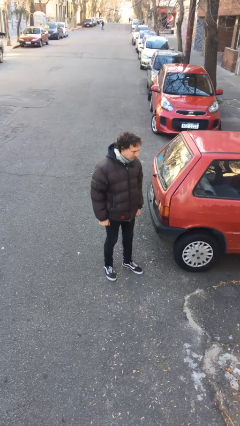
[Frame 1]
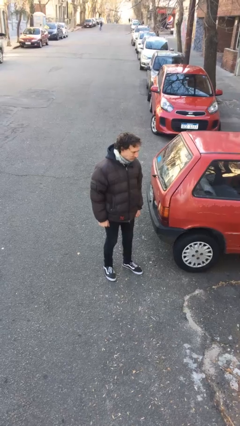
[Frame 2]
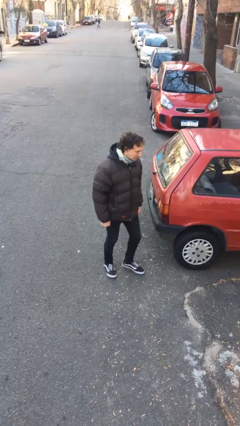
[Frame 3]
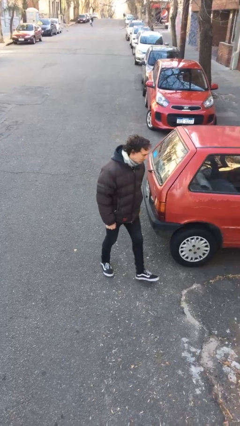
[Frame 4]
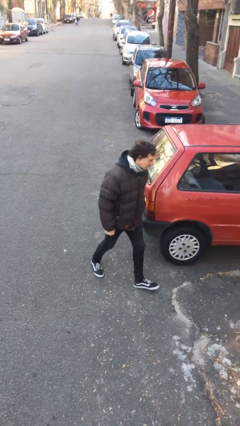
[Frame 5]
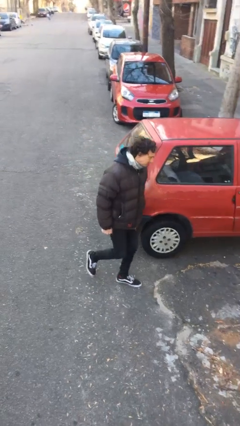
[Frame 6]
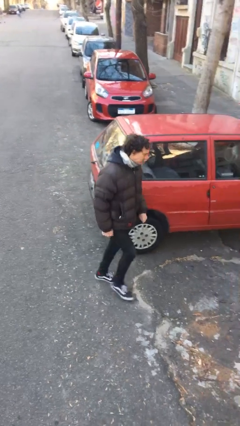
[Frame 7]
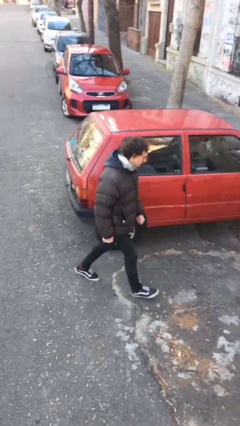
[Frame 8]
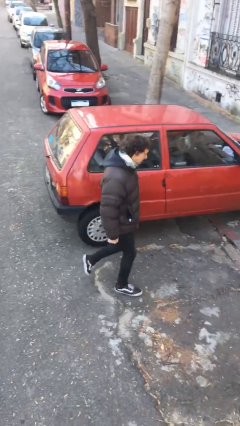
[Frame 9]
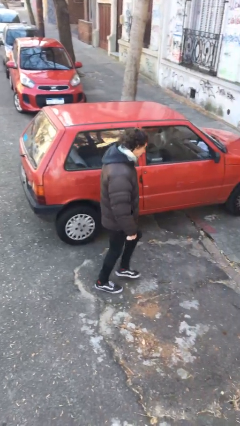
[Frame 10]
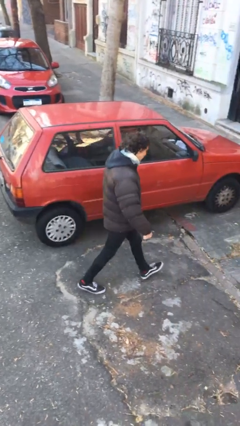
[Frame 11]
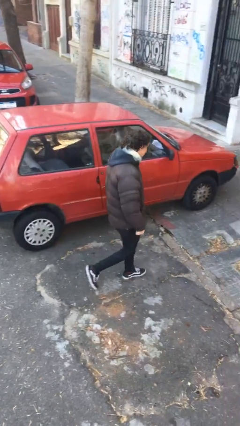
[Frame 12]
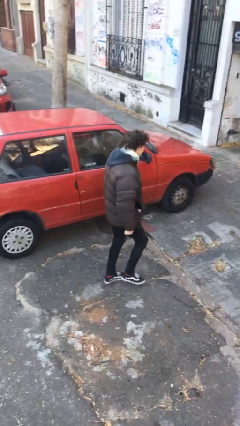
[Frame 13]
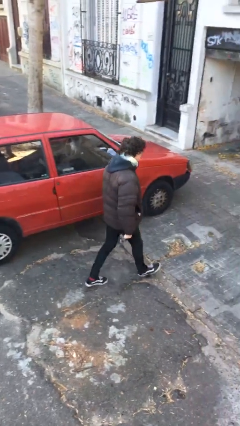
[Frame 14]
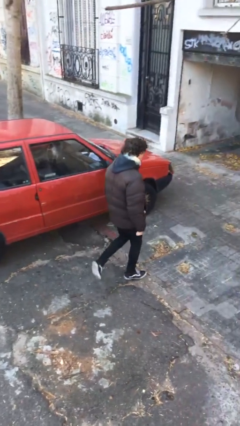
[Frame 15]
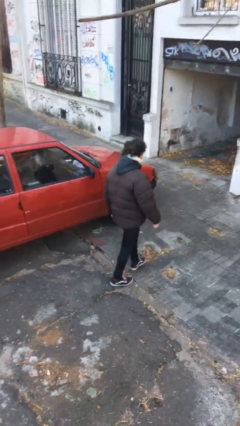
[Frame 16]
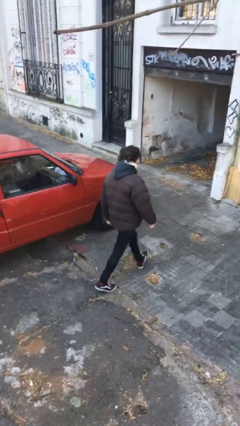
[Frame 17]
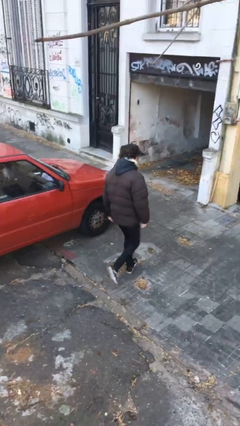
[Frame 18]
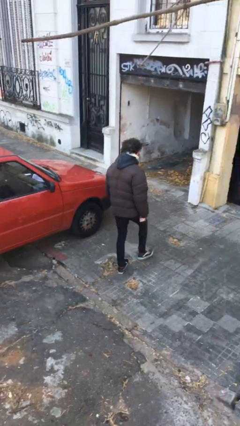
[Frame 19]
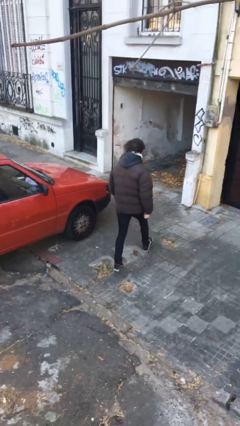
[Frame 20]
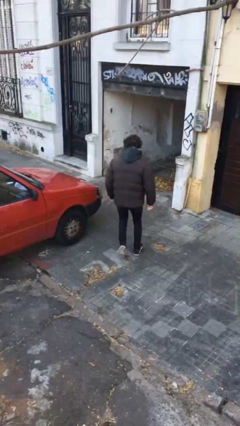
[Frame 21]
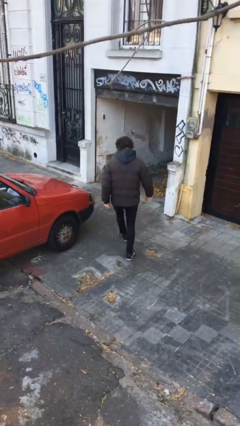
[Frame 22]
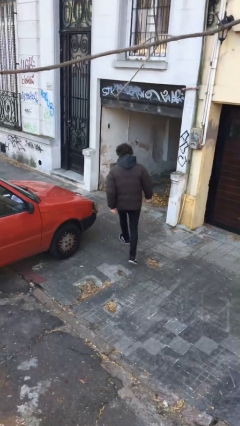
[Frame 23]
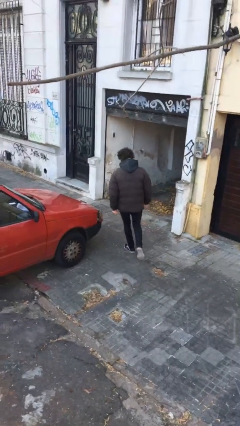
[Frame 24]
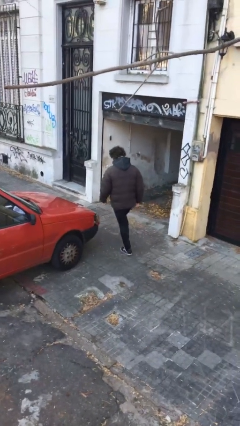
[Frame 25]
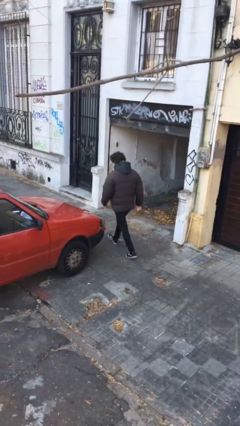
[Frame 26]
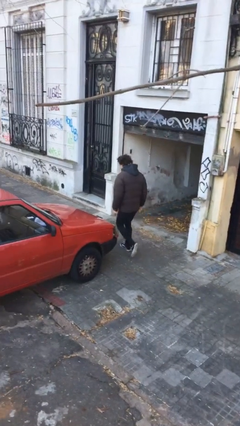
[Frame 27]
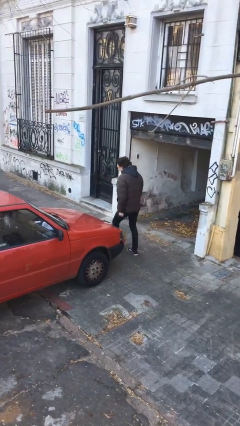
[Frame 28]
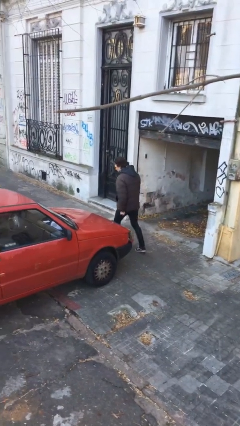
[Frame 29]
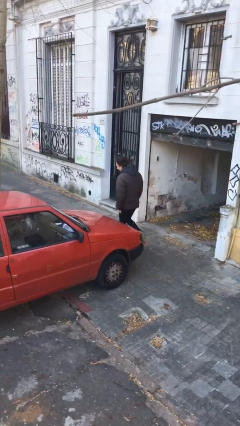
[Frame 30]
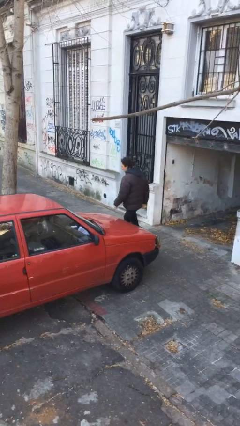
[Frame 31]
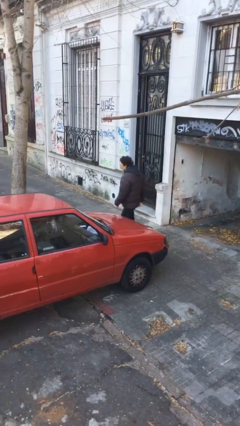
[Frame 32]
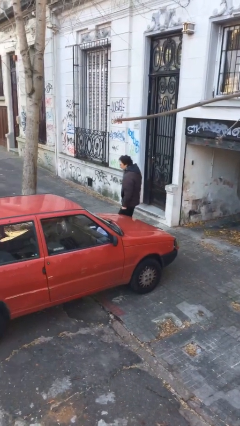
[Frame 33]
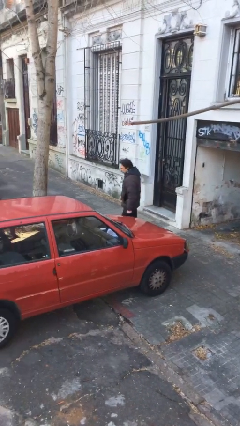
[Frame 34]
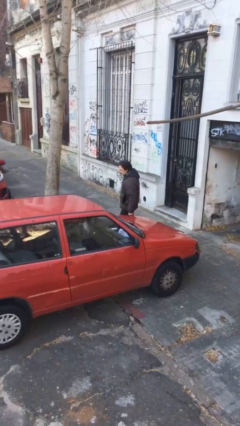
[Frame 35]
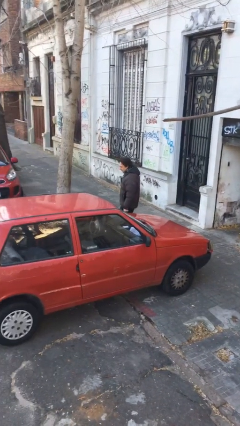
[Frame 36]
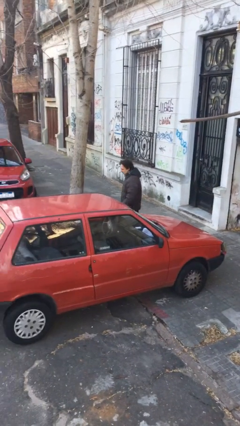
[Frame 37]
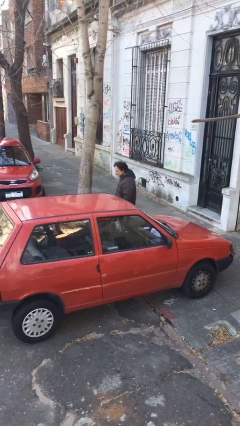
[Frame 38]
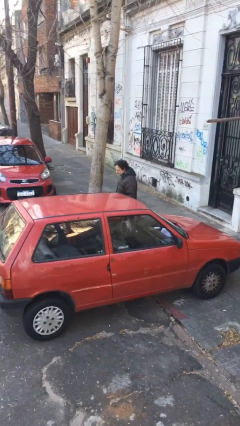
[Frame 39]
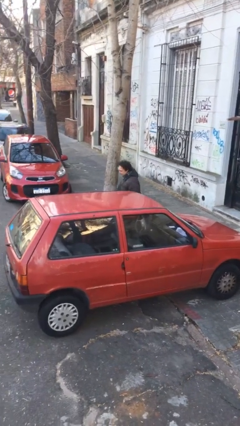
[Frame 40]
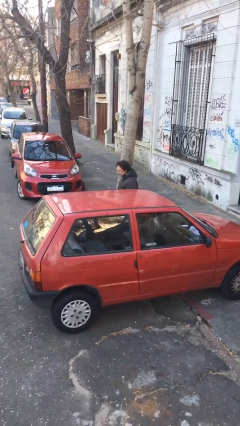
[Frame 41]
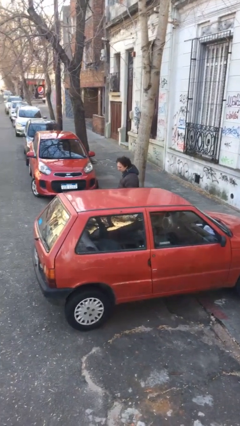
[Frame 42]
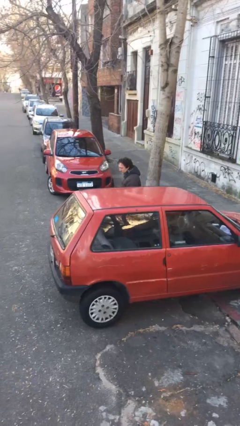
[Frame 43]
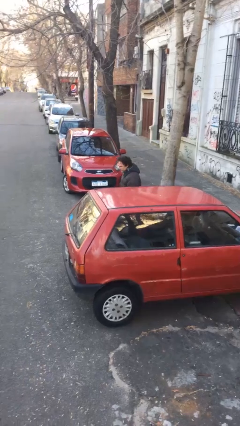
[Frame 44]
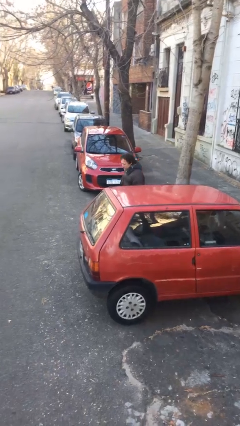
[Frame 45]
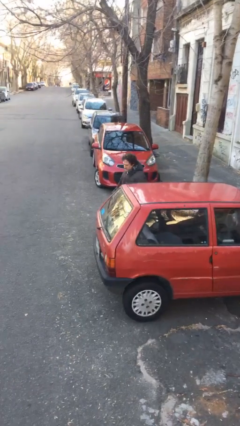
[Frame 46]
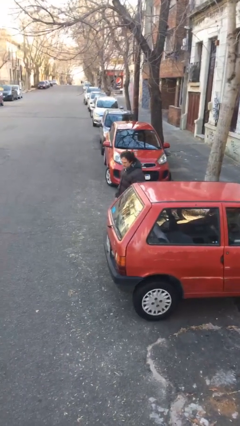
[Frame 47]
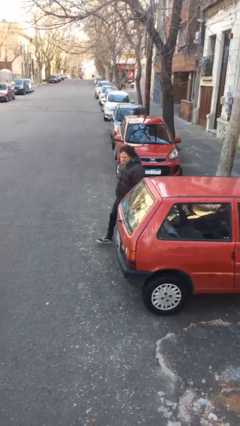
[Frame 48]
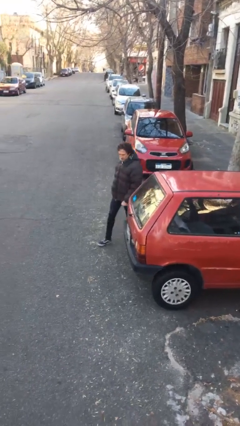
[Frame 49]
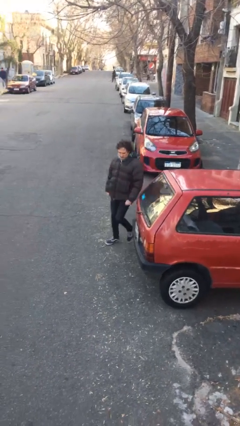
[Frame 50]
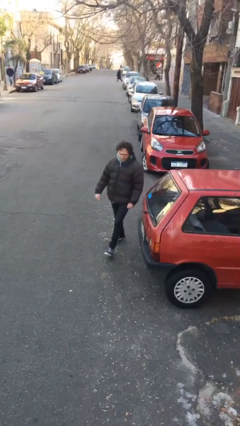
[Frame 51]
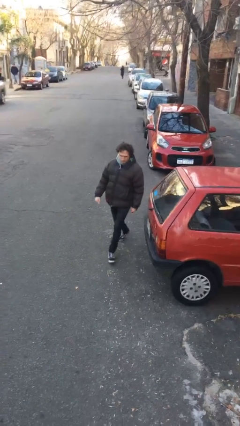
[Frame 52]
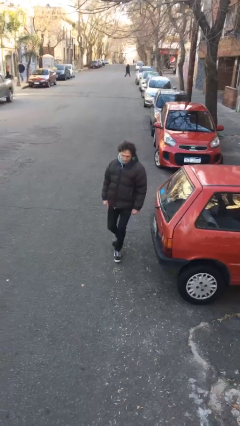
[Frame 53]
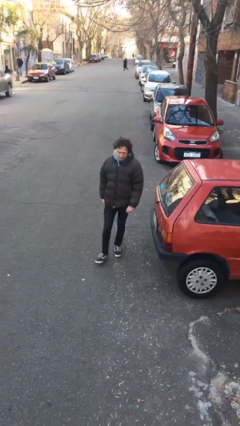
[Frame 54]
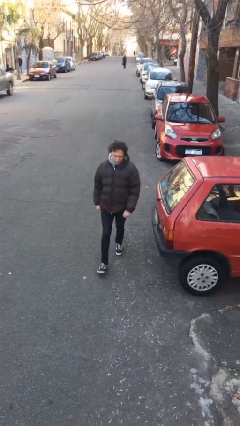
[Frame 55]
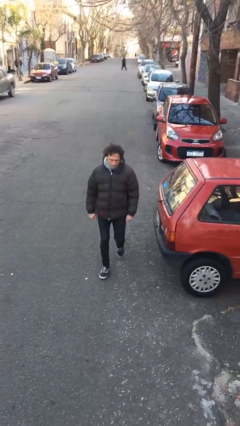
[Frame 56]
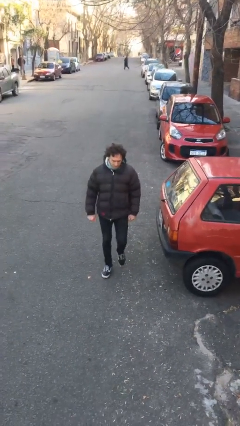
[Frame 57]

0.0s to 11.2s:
person walks around car

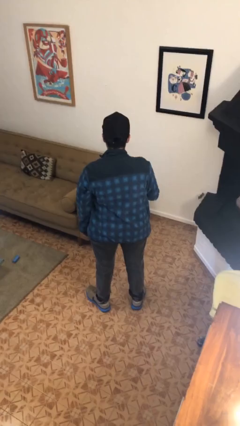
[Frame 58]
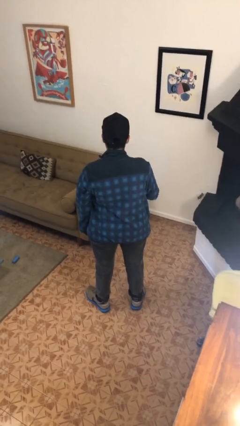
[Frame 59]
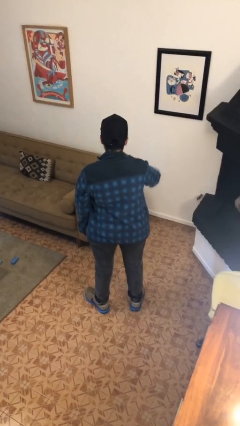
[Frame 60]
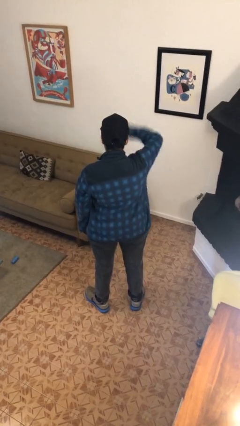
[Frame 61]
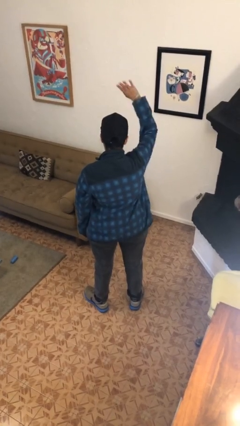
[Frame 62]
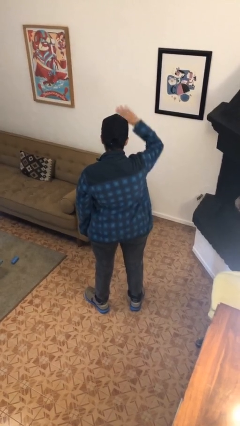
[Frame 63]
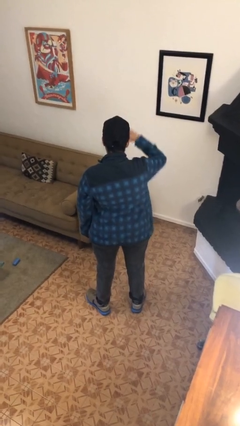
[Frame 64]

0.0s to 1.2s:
person gestures swipe up

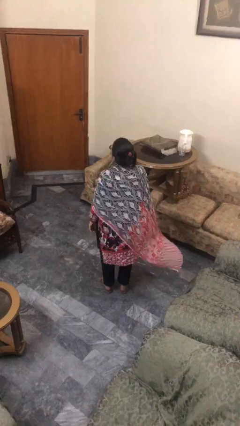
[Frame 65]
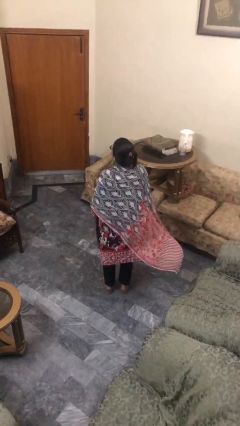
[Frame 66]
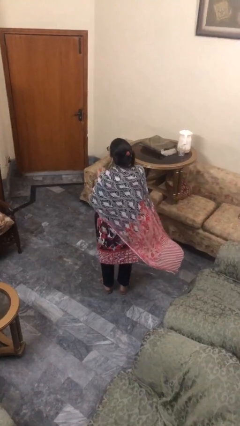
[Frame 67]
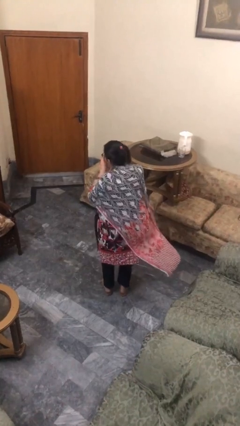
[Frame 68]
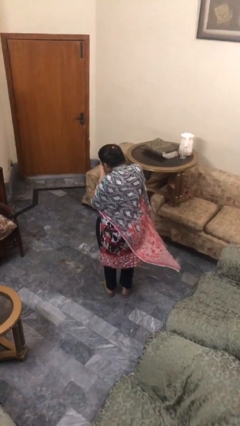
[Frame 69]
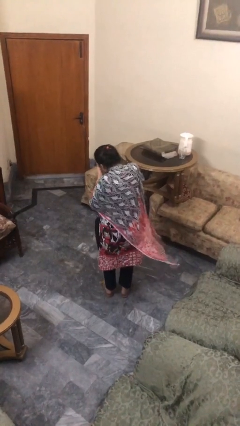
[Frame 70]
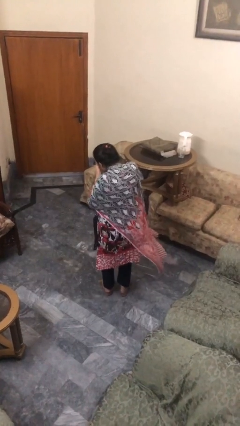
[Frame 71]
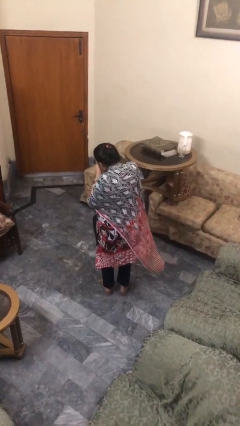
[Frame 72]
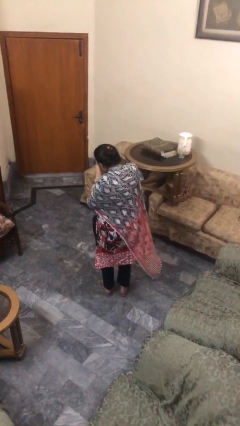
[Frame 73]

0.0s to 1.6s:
person sneezes into hand

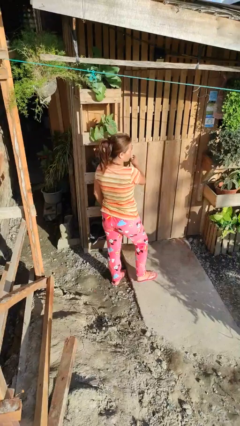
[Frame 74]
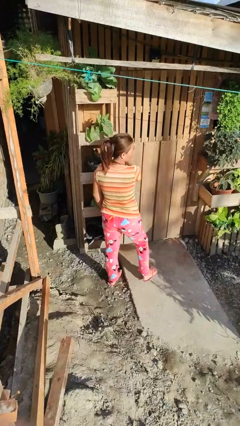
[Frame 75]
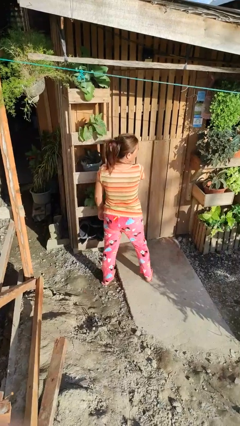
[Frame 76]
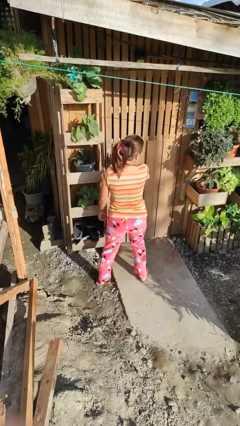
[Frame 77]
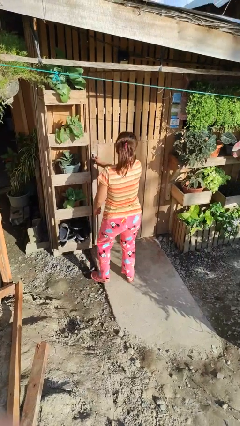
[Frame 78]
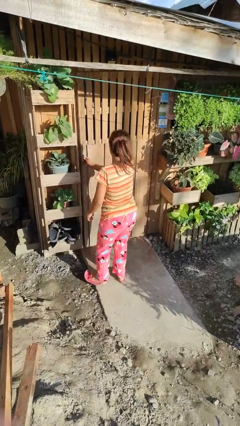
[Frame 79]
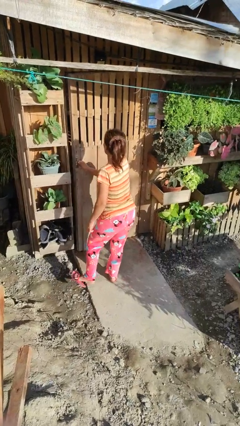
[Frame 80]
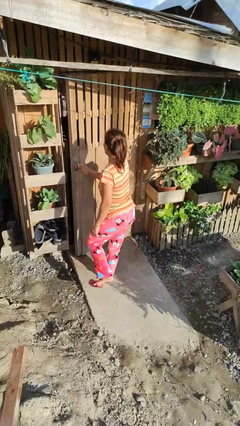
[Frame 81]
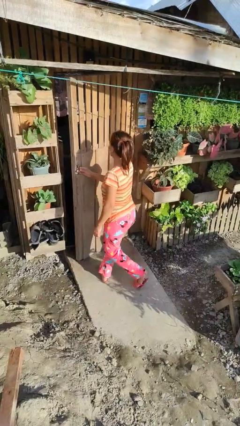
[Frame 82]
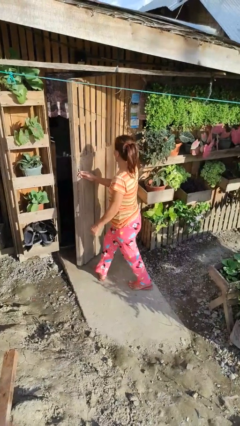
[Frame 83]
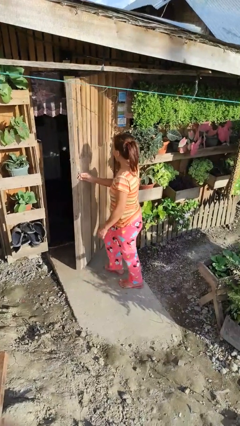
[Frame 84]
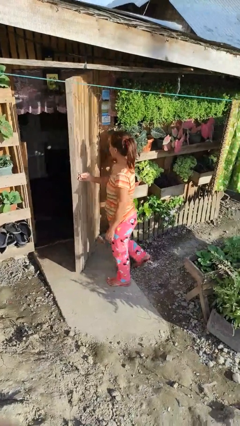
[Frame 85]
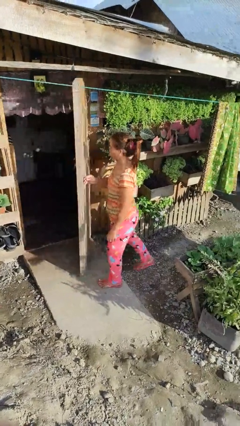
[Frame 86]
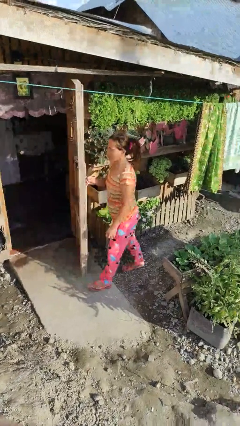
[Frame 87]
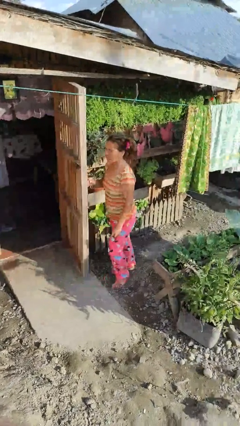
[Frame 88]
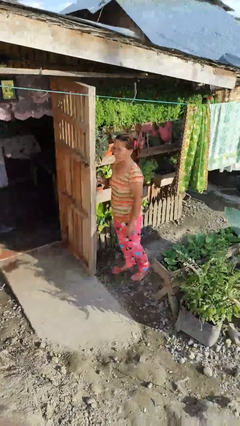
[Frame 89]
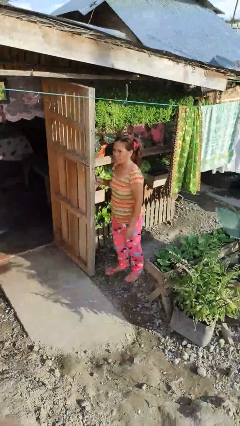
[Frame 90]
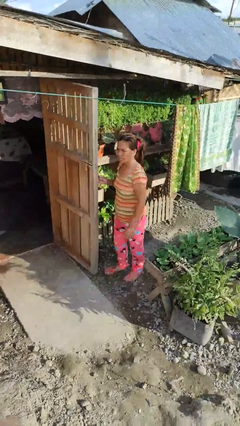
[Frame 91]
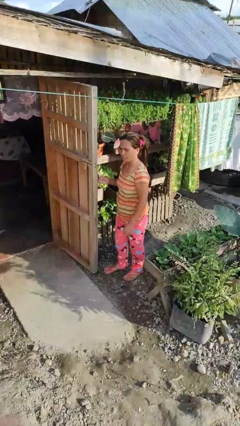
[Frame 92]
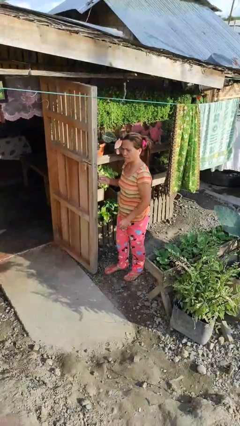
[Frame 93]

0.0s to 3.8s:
person opens facility door
